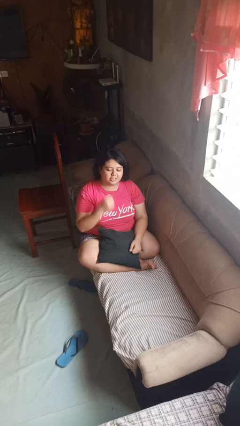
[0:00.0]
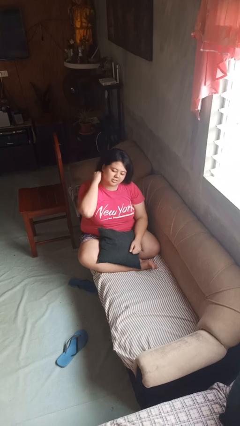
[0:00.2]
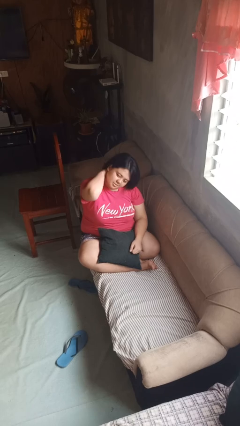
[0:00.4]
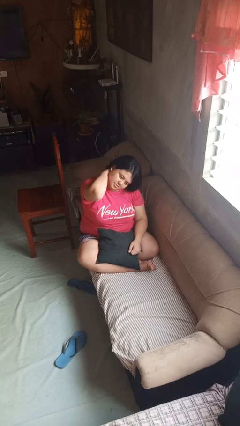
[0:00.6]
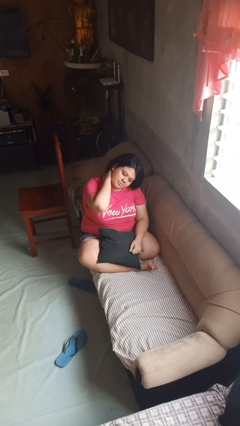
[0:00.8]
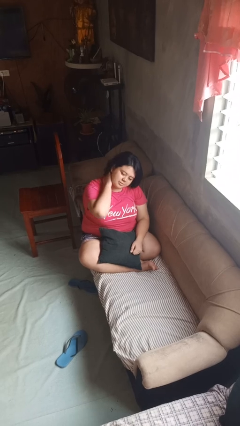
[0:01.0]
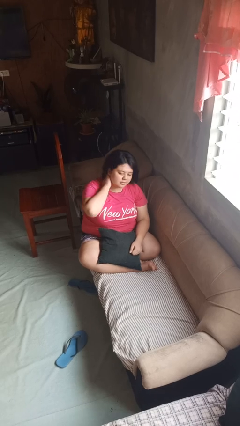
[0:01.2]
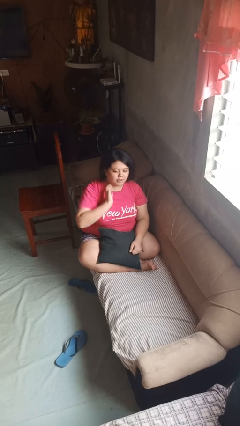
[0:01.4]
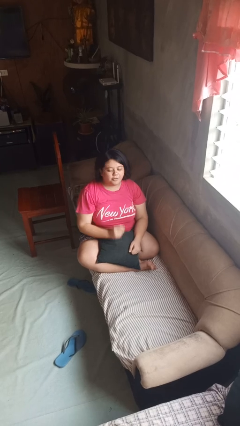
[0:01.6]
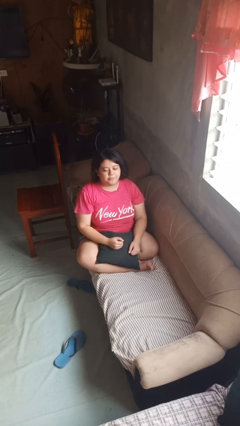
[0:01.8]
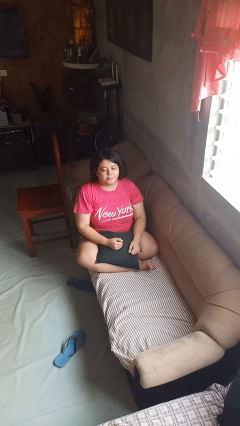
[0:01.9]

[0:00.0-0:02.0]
person rubs neck

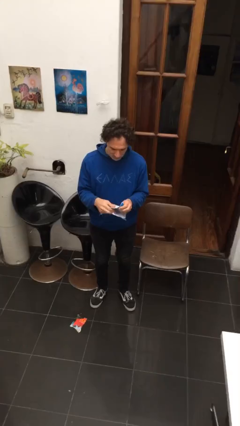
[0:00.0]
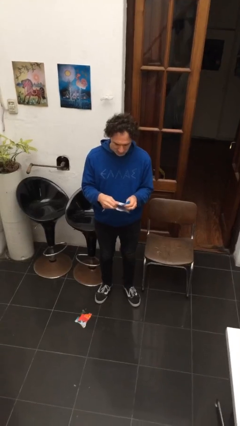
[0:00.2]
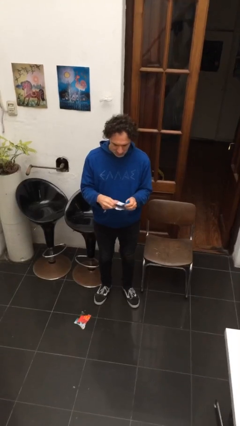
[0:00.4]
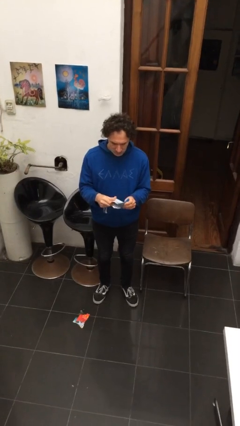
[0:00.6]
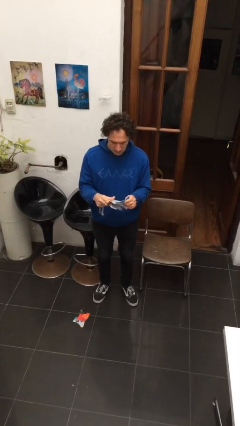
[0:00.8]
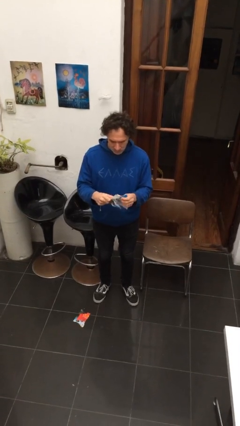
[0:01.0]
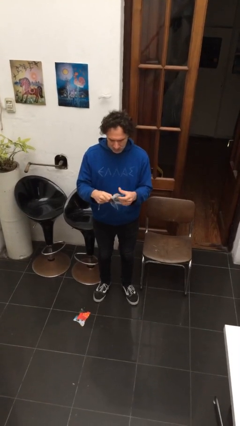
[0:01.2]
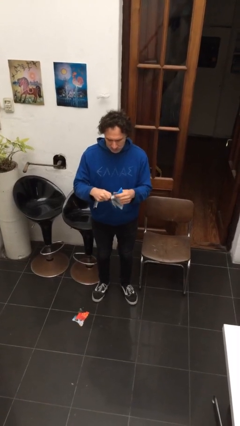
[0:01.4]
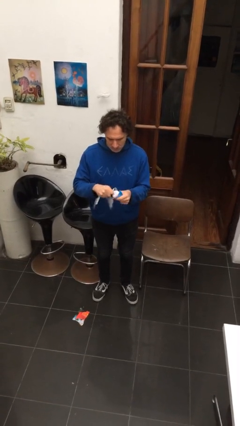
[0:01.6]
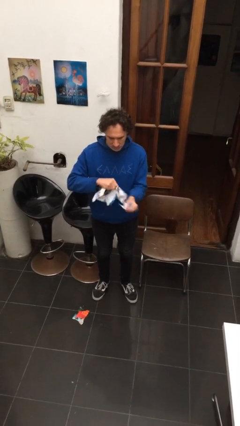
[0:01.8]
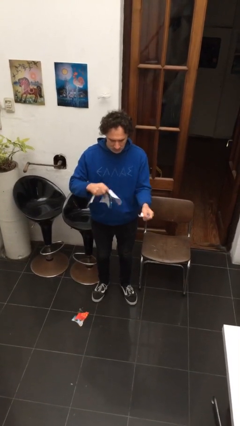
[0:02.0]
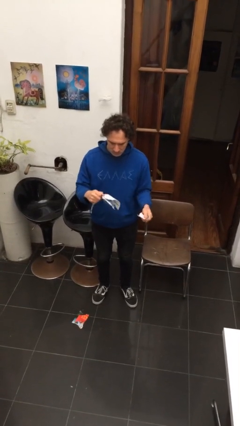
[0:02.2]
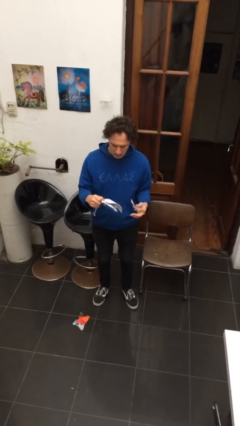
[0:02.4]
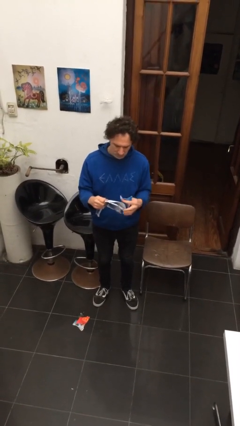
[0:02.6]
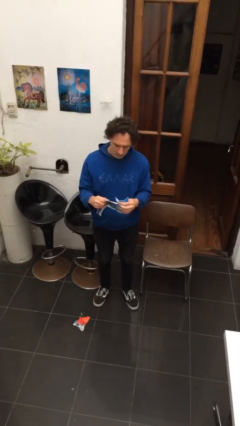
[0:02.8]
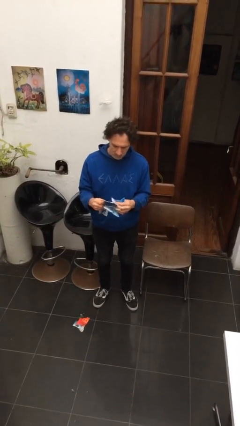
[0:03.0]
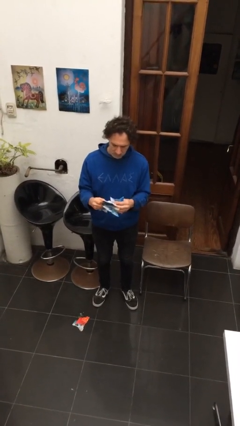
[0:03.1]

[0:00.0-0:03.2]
person tears paper

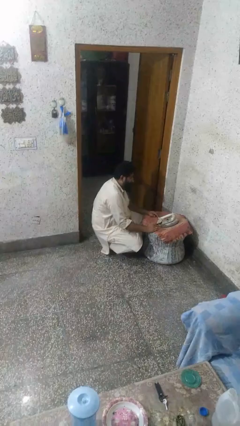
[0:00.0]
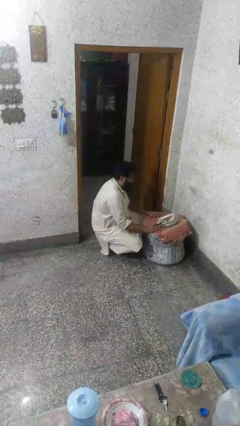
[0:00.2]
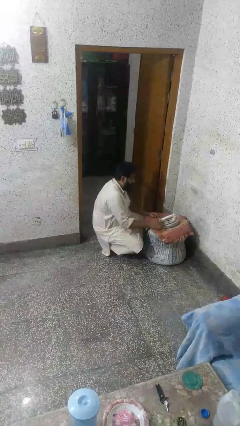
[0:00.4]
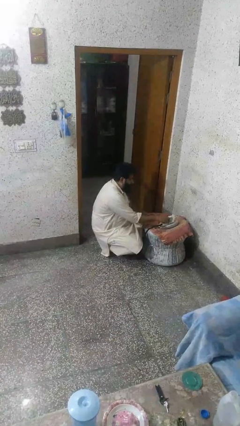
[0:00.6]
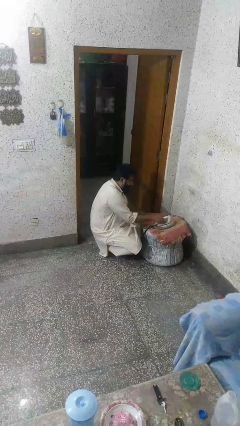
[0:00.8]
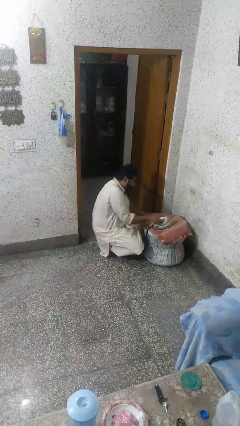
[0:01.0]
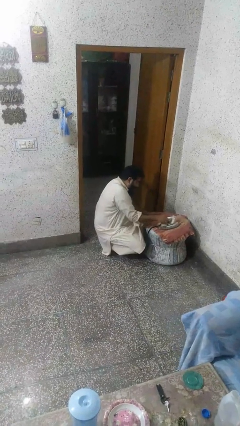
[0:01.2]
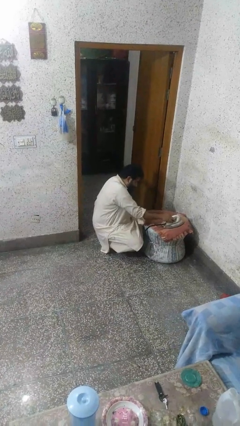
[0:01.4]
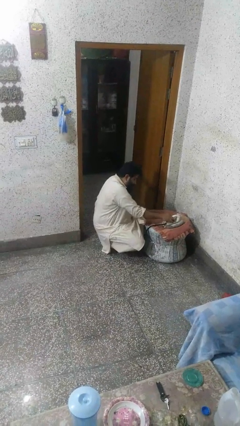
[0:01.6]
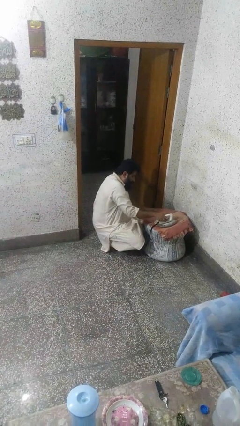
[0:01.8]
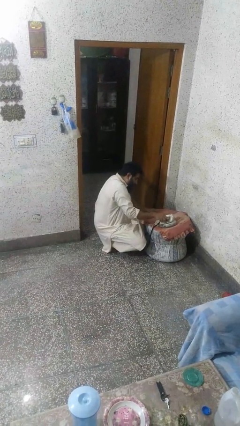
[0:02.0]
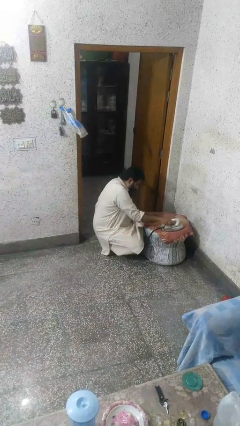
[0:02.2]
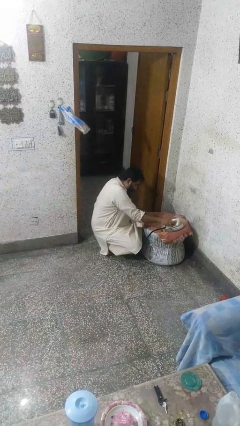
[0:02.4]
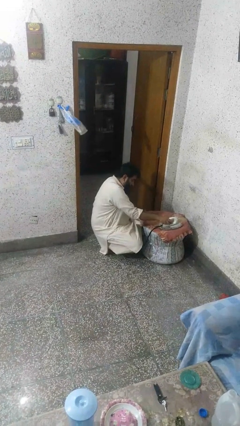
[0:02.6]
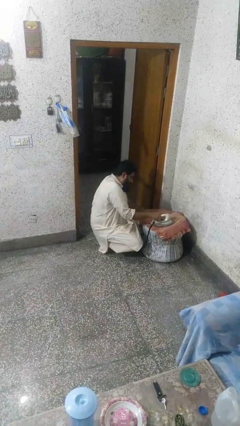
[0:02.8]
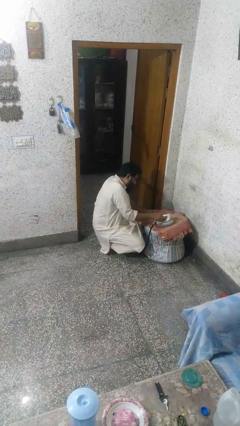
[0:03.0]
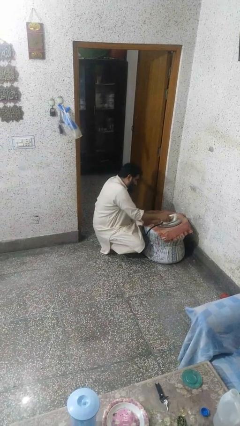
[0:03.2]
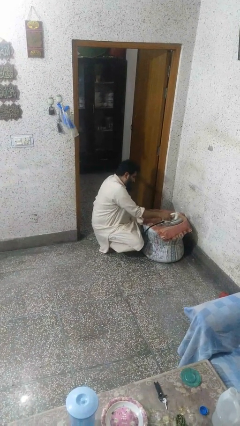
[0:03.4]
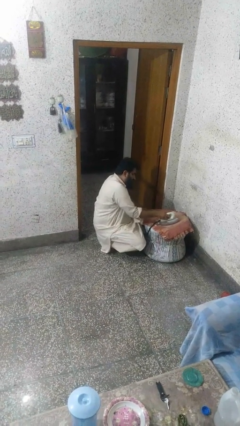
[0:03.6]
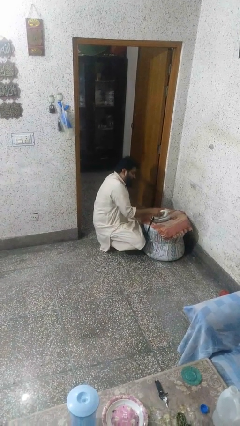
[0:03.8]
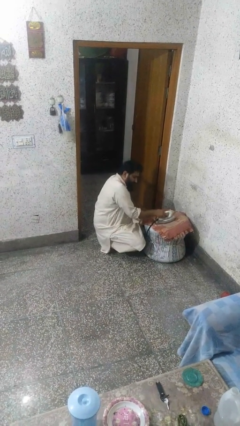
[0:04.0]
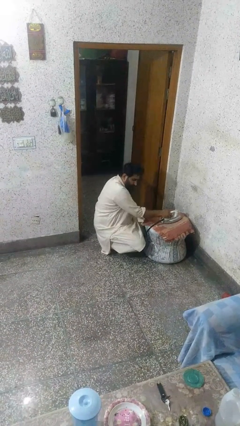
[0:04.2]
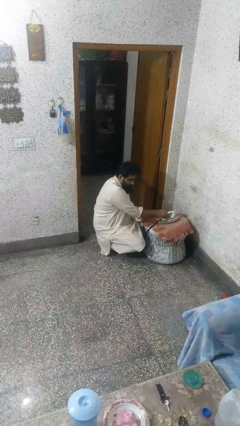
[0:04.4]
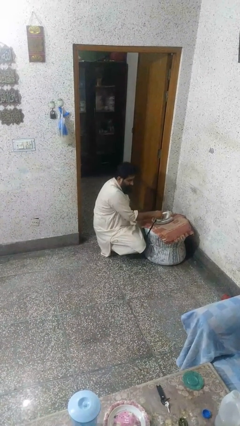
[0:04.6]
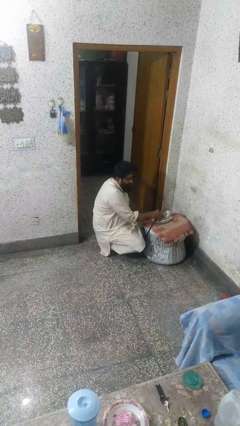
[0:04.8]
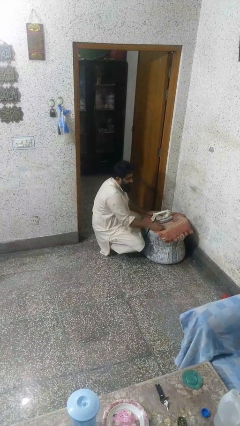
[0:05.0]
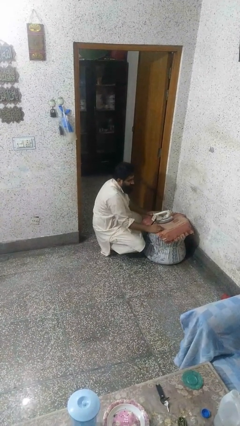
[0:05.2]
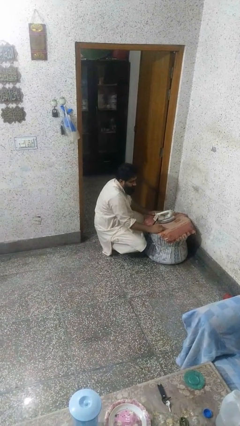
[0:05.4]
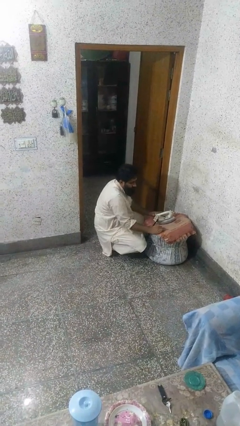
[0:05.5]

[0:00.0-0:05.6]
person irons clothes

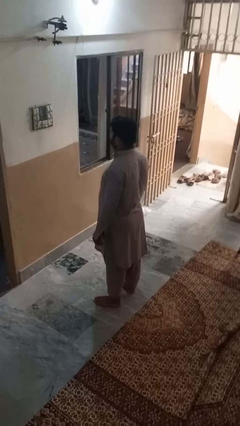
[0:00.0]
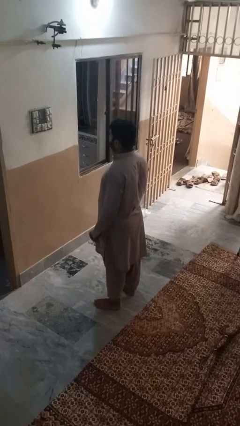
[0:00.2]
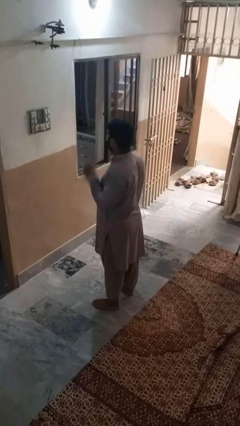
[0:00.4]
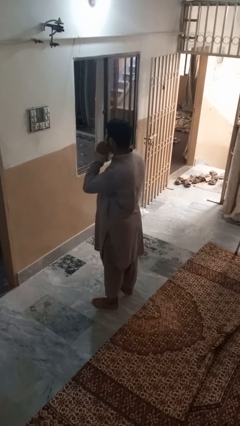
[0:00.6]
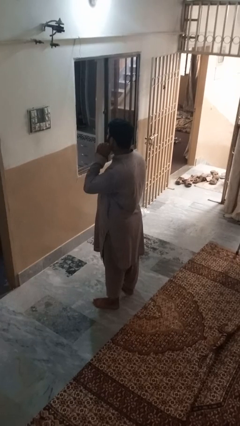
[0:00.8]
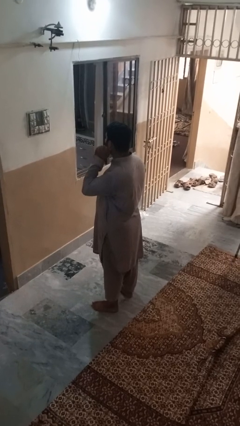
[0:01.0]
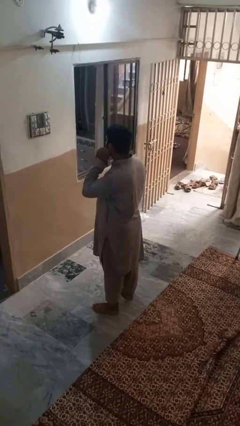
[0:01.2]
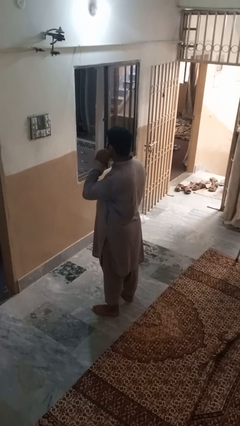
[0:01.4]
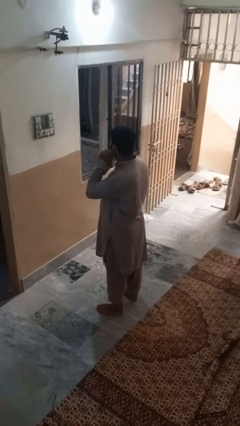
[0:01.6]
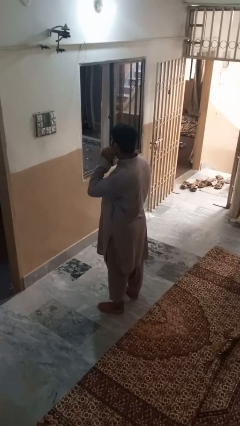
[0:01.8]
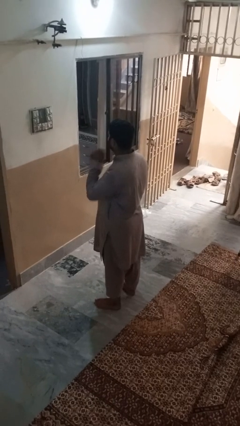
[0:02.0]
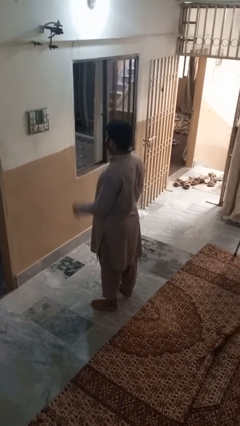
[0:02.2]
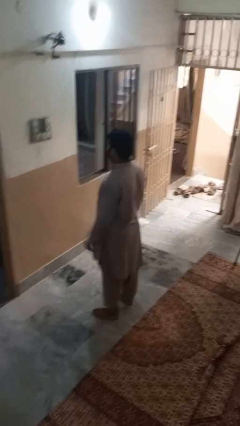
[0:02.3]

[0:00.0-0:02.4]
person touches earlobe

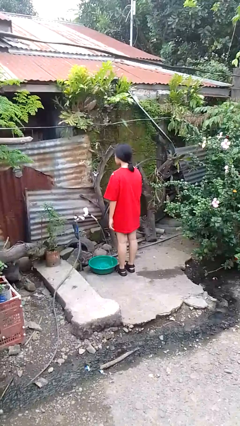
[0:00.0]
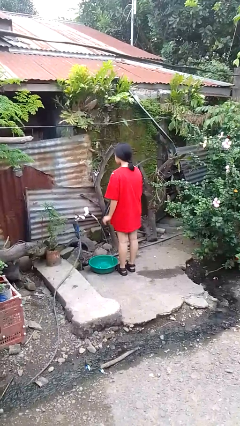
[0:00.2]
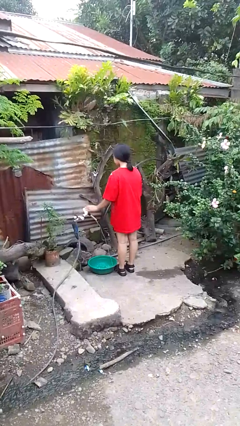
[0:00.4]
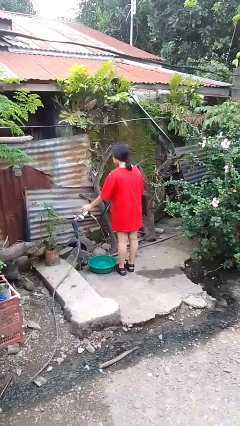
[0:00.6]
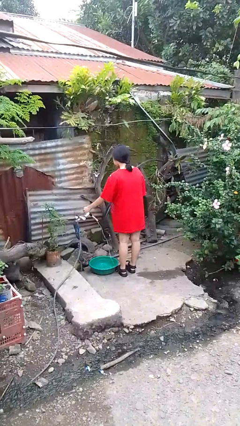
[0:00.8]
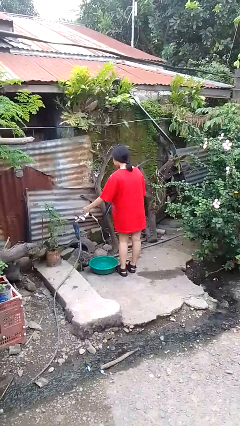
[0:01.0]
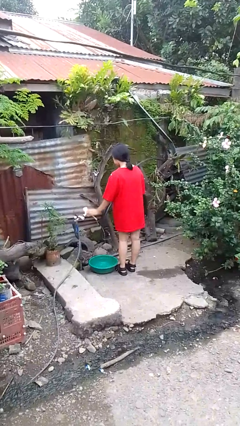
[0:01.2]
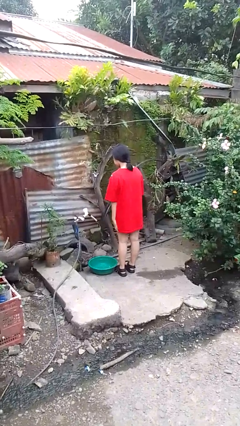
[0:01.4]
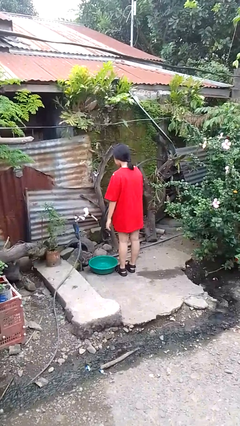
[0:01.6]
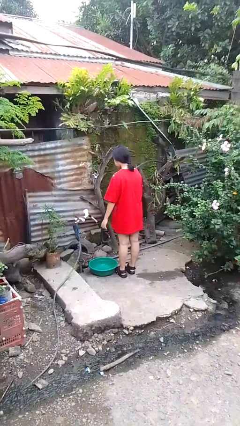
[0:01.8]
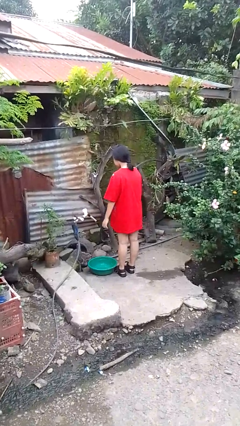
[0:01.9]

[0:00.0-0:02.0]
person turns off faucet

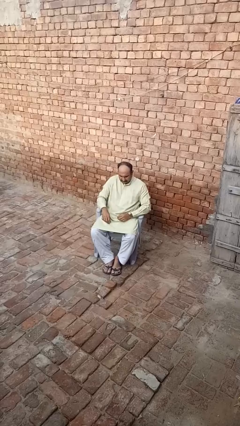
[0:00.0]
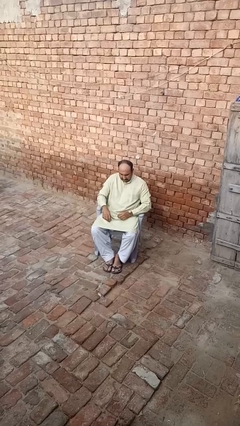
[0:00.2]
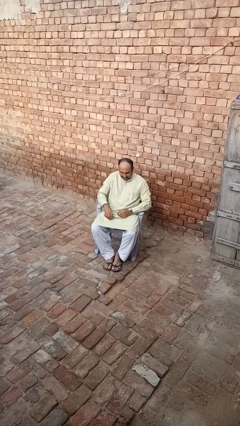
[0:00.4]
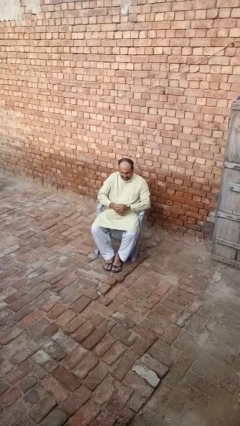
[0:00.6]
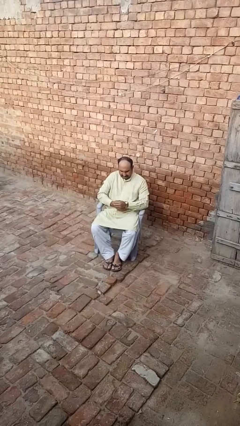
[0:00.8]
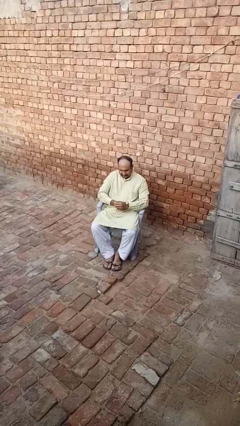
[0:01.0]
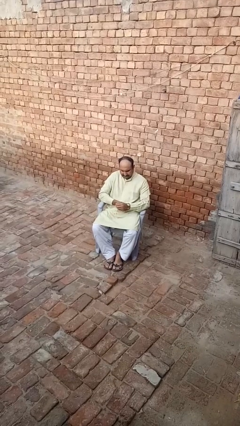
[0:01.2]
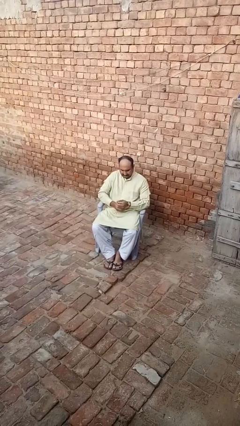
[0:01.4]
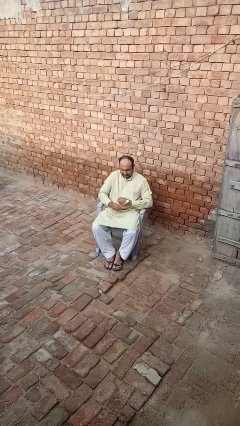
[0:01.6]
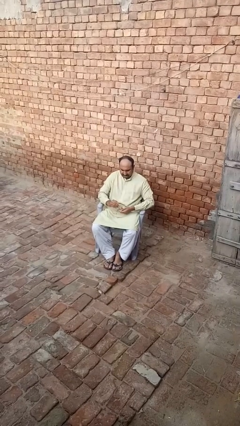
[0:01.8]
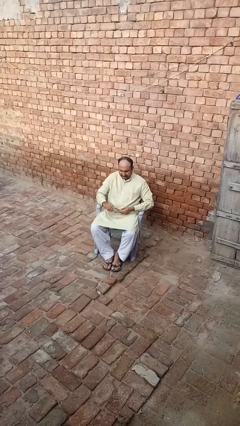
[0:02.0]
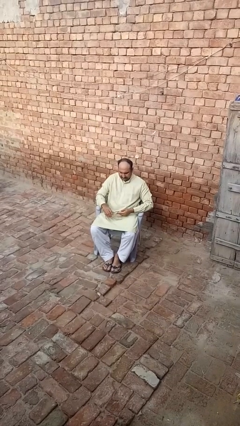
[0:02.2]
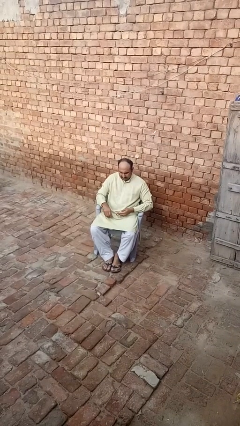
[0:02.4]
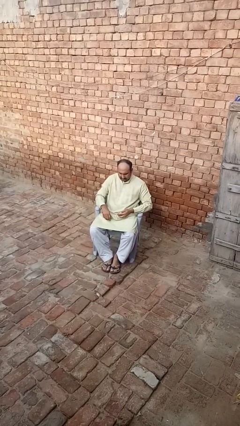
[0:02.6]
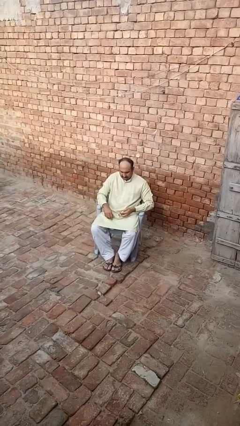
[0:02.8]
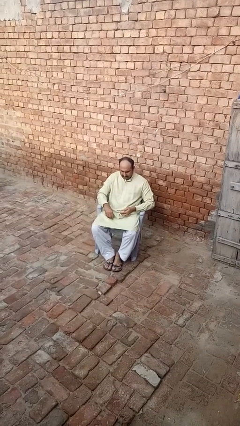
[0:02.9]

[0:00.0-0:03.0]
person takes off wristwatch
